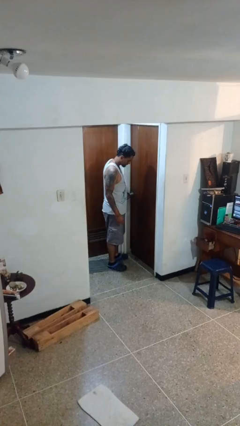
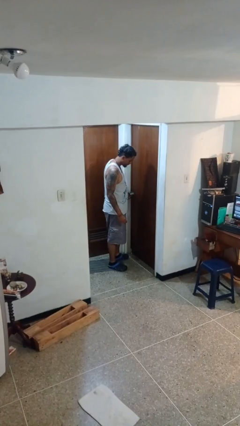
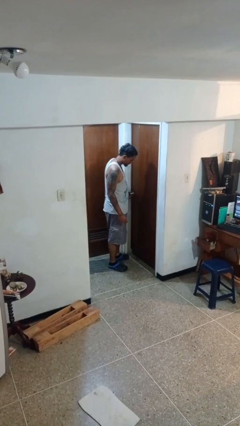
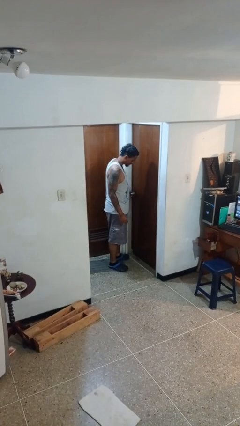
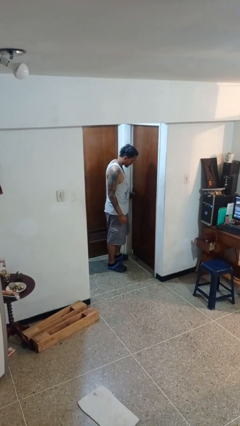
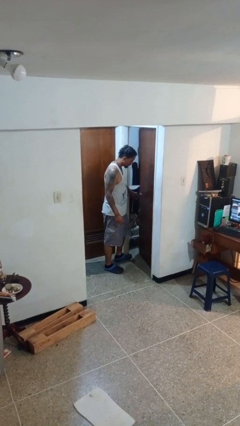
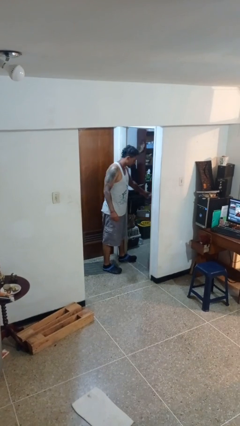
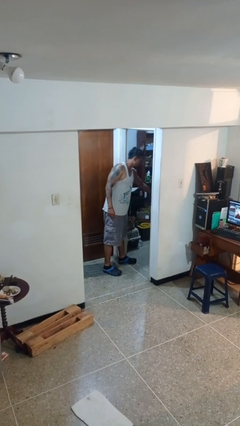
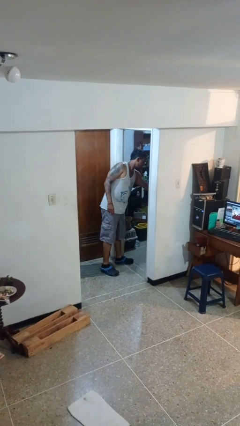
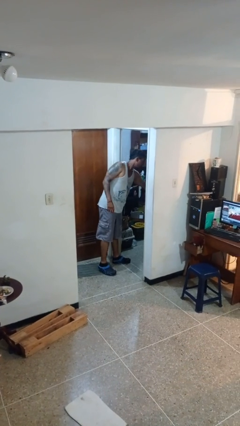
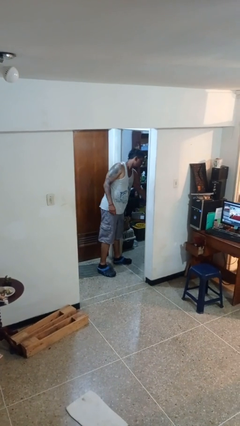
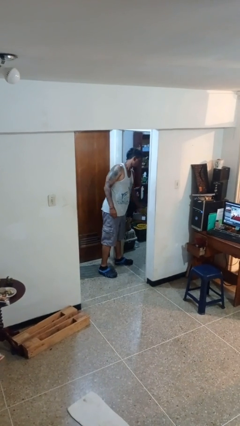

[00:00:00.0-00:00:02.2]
person opens gate

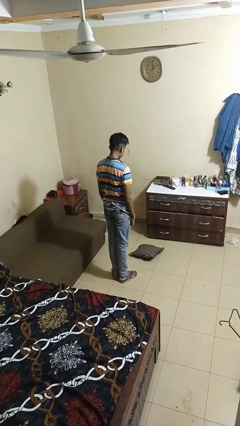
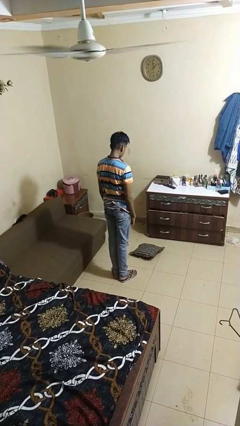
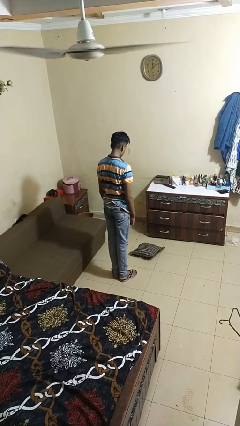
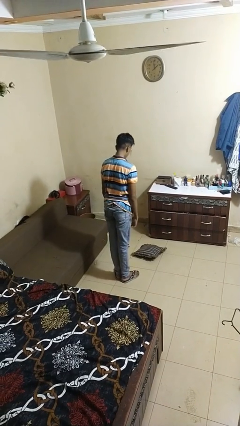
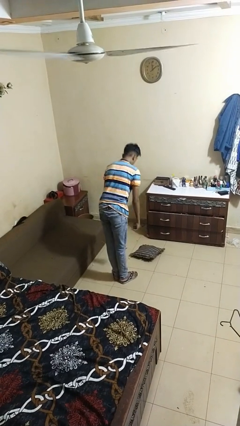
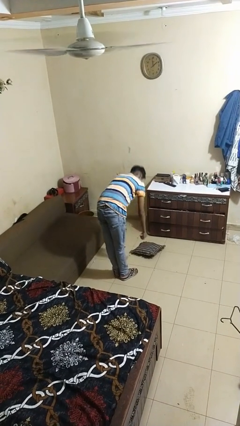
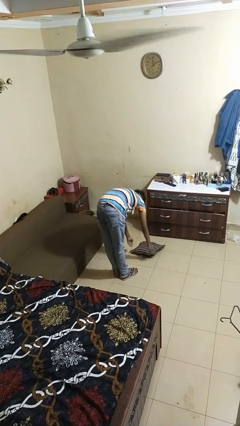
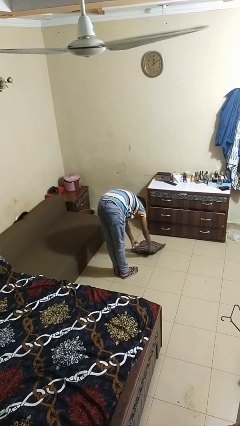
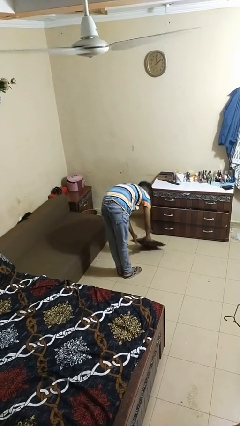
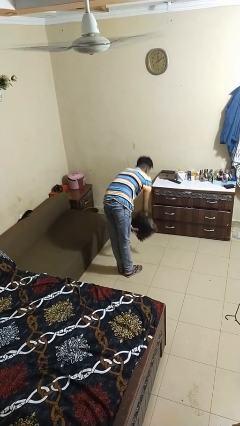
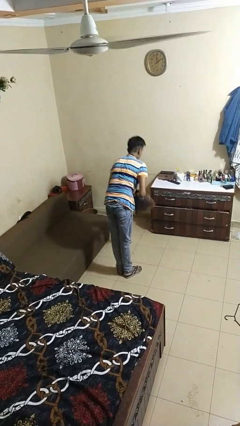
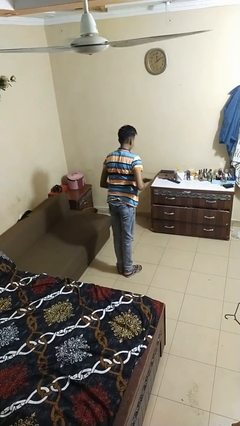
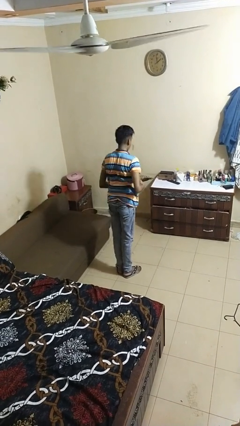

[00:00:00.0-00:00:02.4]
person picks up object from floor

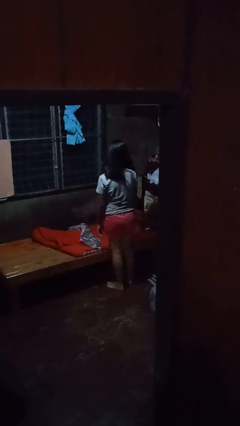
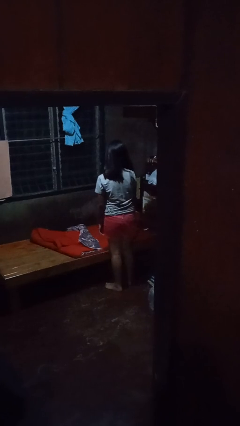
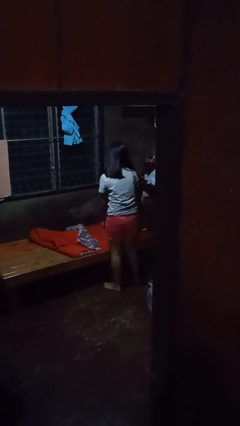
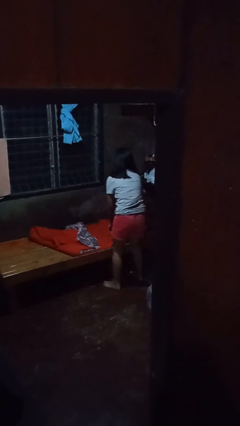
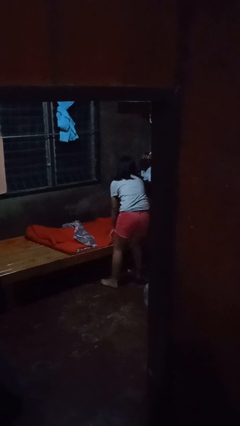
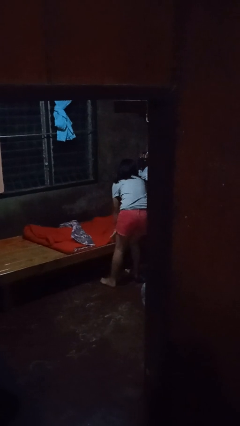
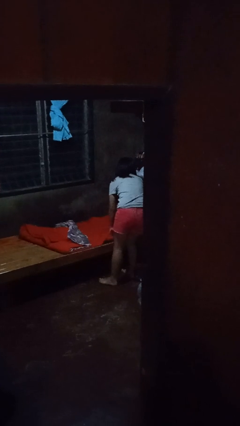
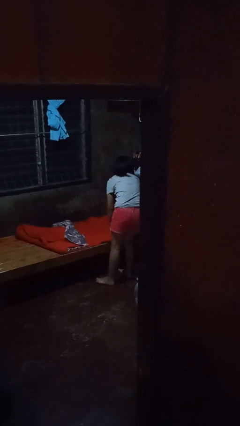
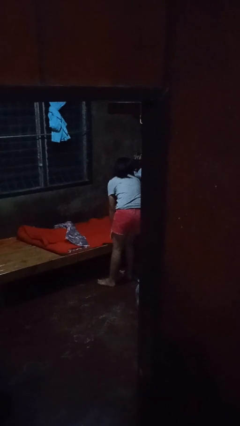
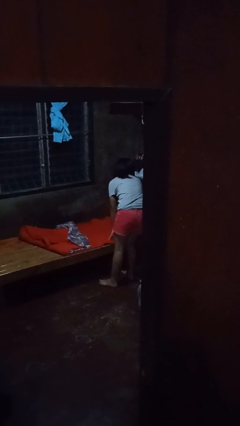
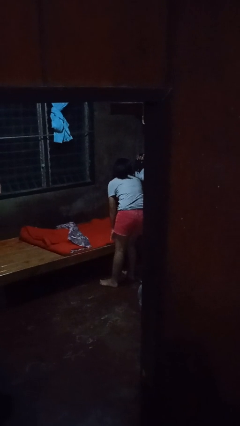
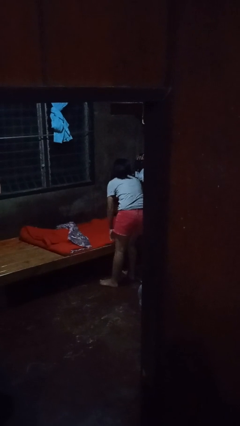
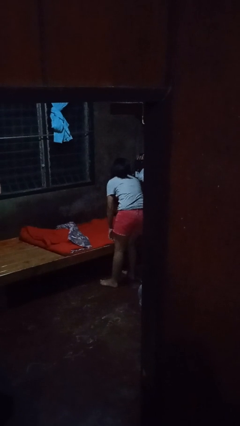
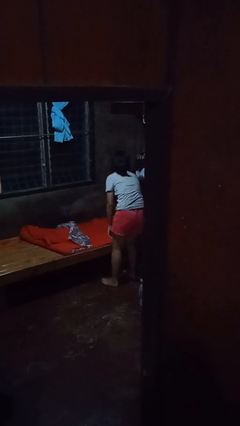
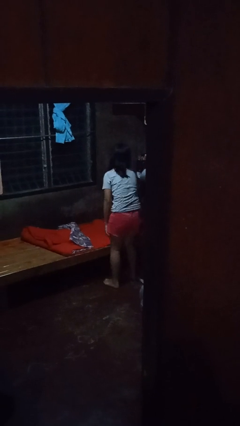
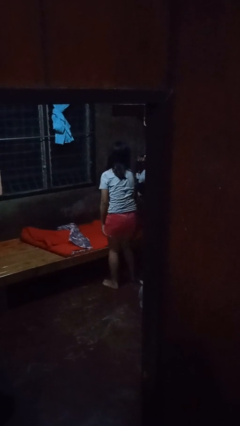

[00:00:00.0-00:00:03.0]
person makes bed

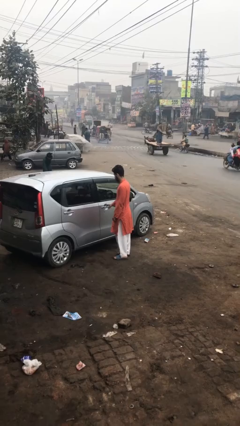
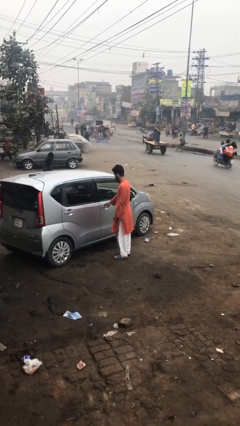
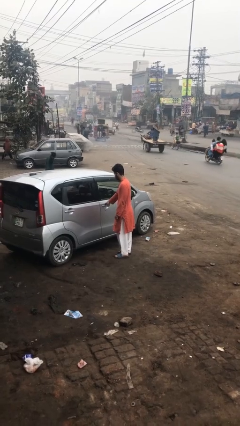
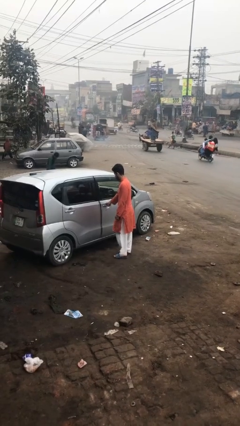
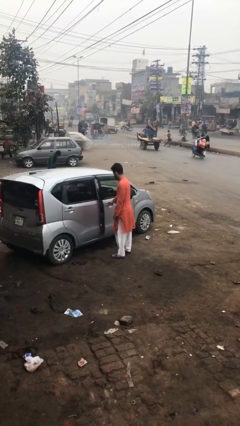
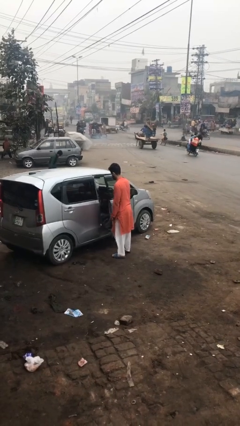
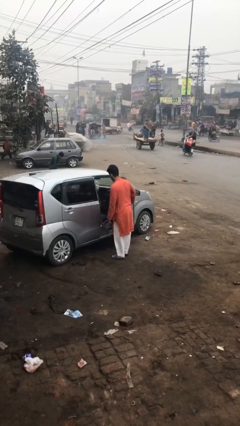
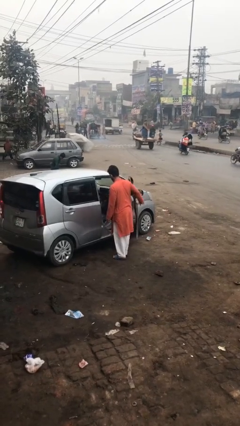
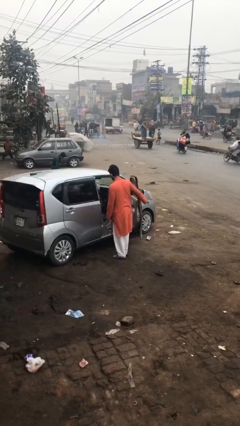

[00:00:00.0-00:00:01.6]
person opens car door

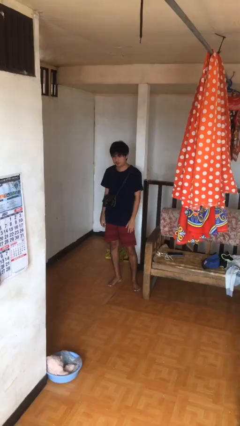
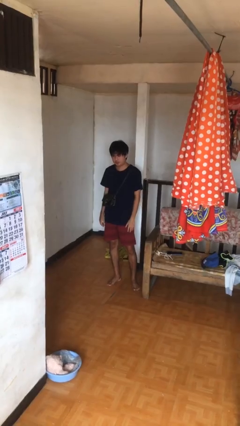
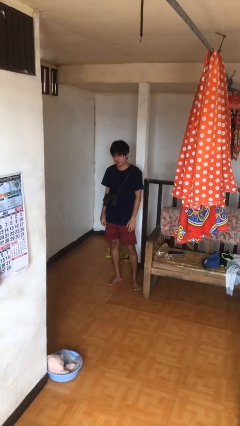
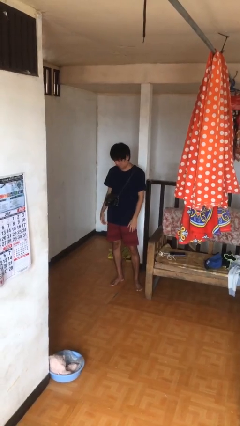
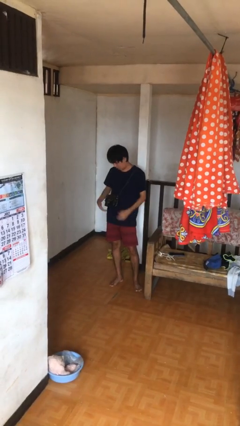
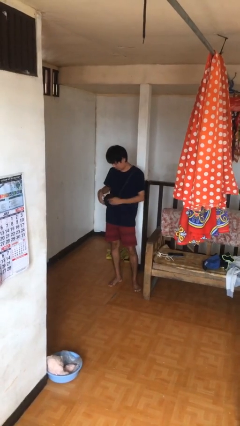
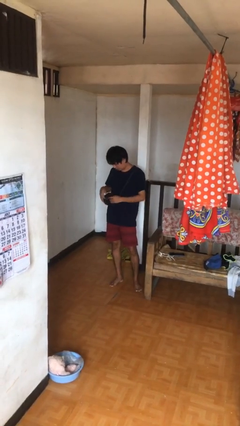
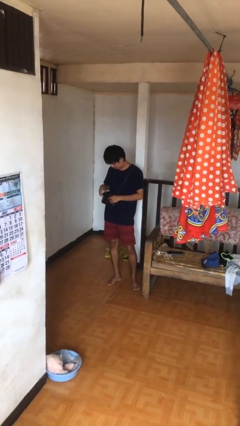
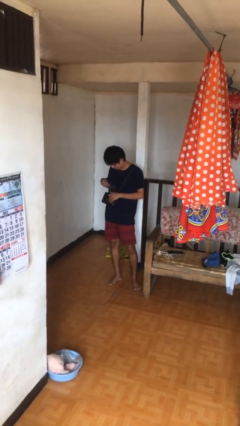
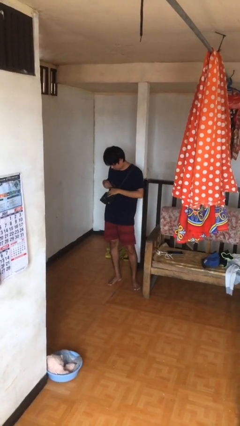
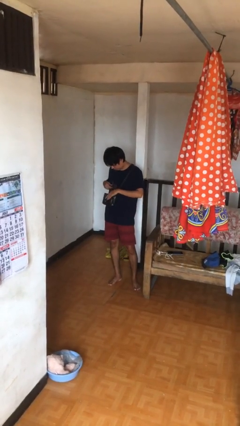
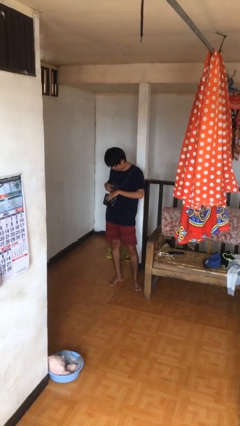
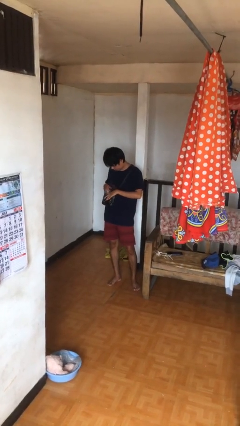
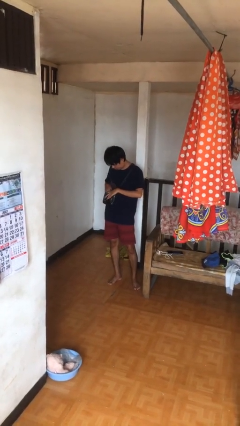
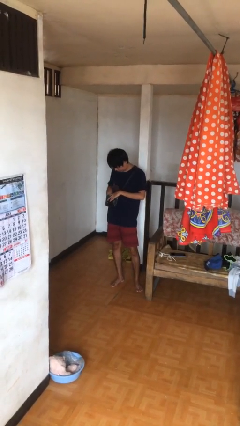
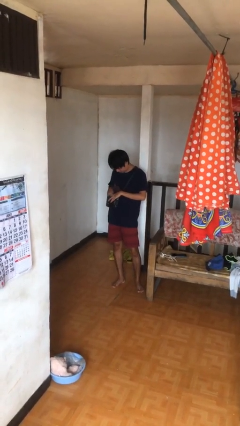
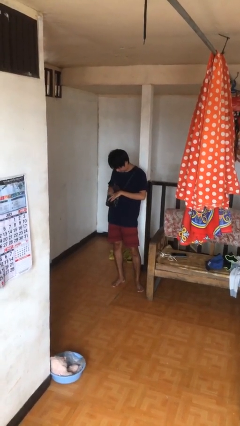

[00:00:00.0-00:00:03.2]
person searches in purse

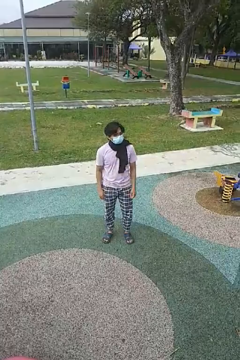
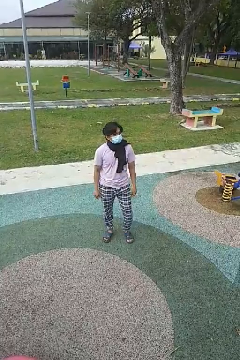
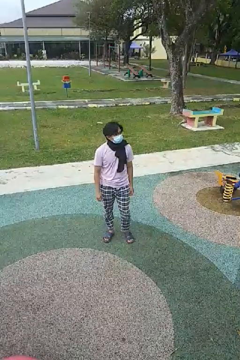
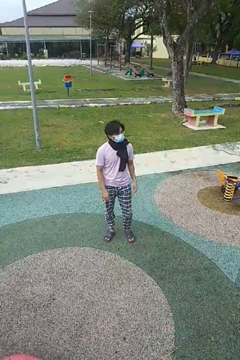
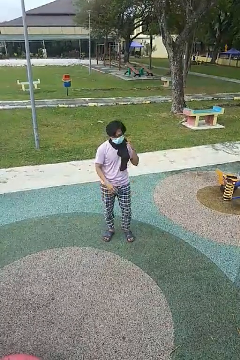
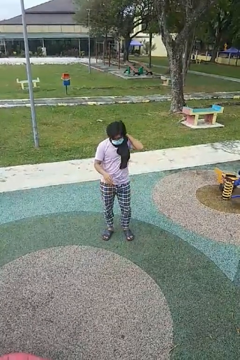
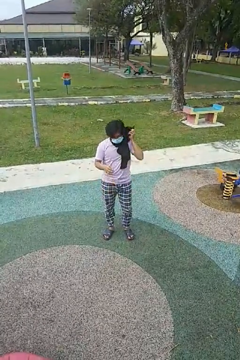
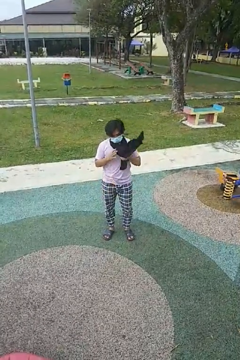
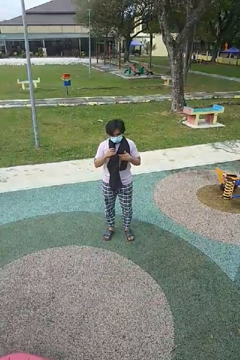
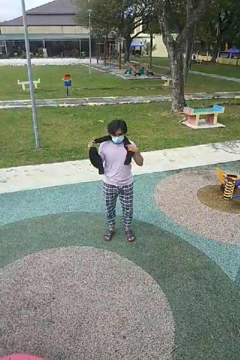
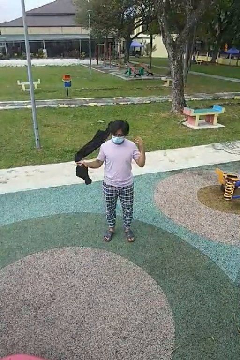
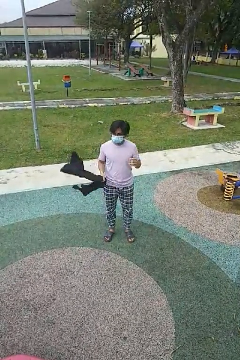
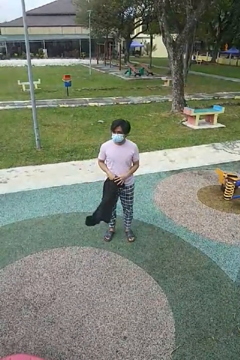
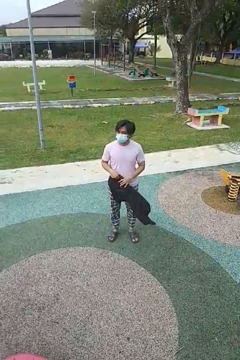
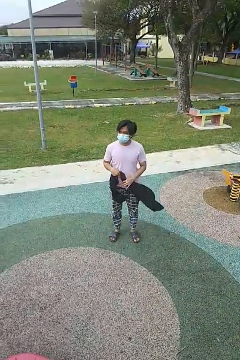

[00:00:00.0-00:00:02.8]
person takes off scarf

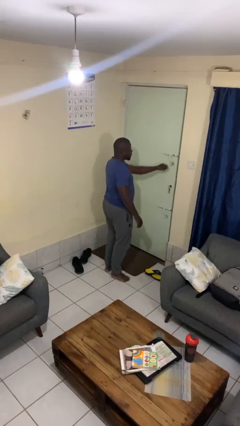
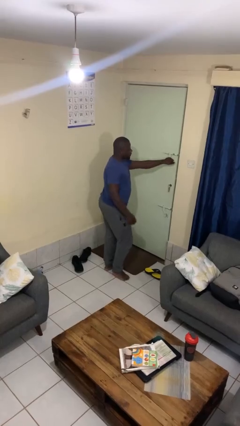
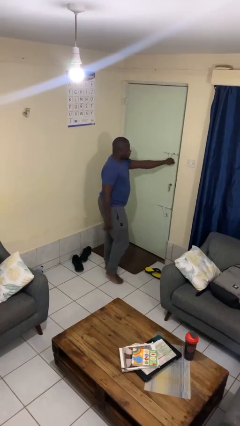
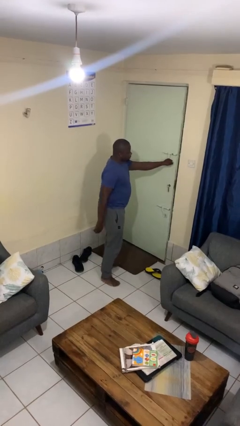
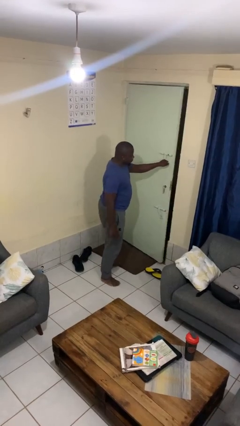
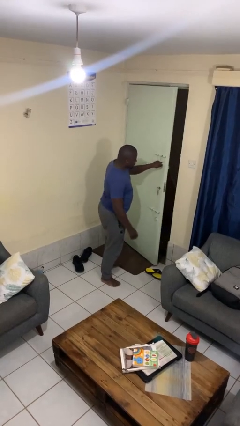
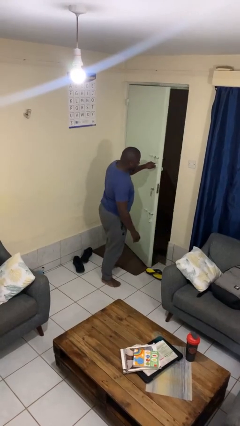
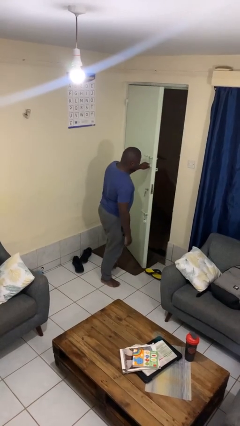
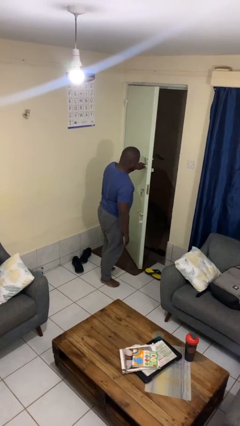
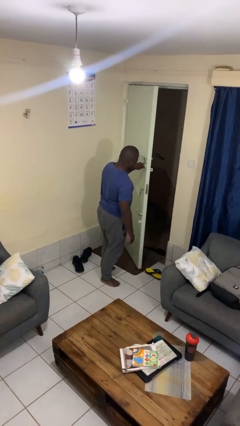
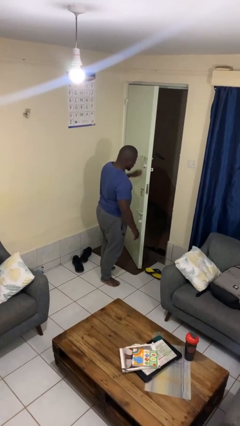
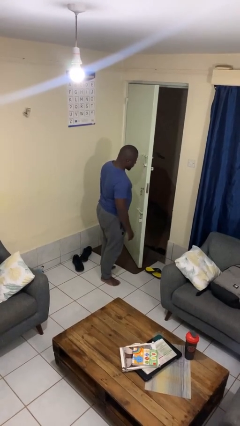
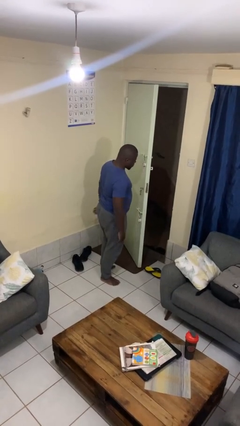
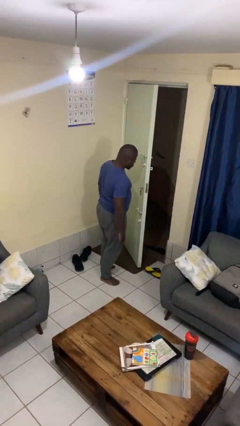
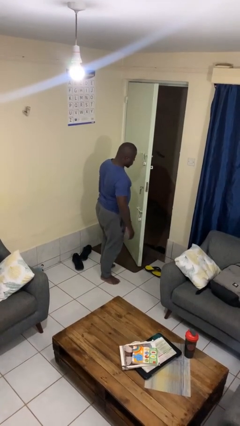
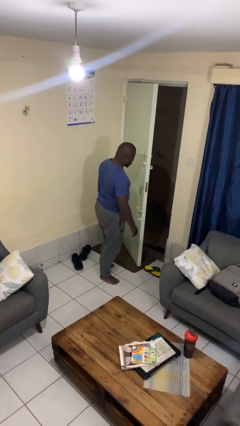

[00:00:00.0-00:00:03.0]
person opens facility door
